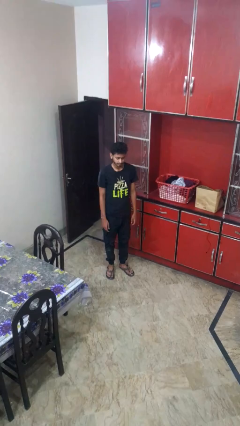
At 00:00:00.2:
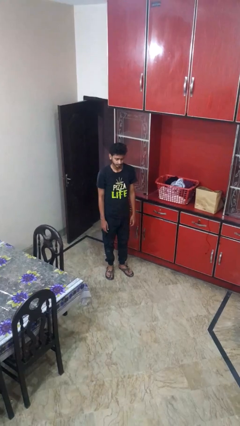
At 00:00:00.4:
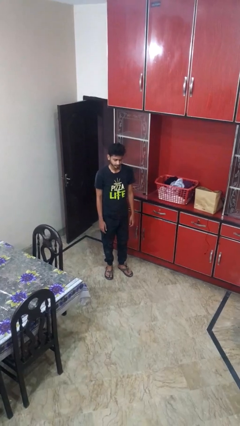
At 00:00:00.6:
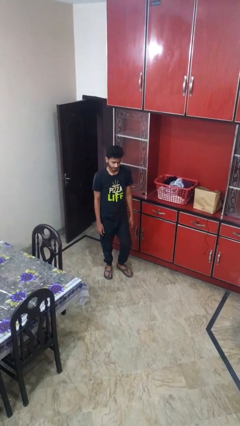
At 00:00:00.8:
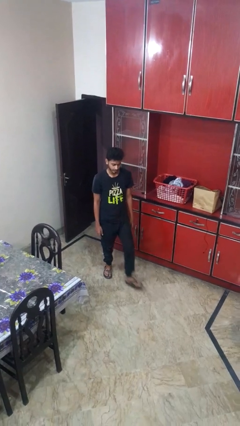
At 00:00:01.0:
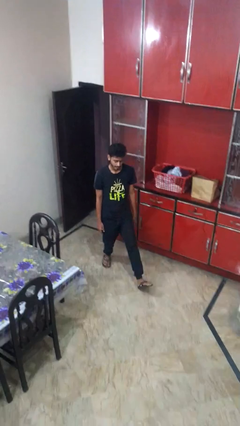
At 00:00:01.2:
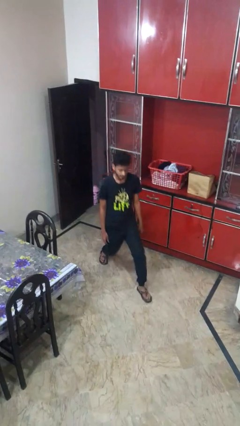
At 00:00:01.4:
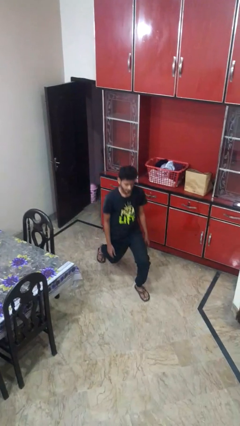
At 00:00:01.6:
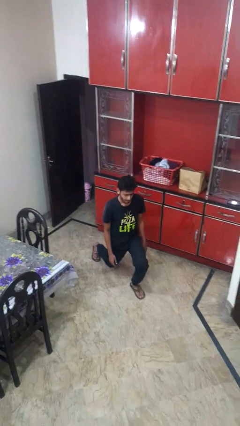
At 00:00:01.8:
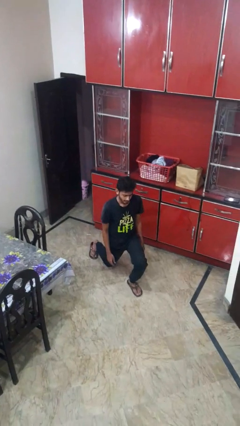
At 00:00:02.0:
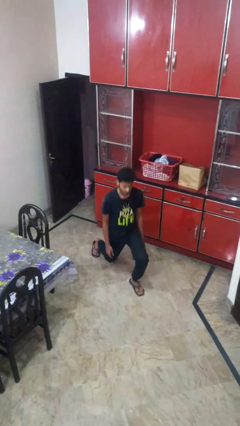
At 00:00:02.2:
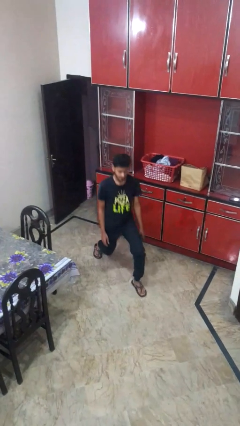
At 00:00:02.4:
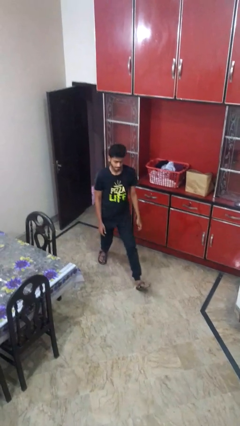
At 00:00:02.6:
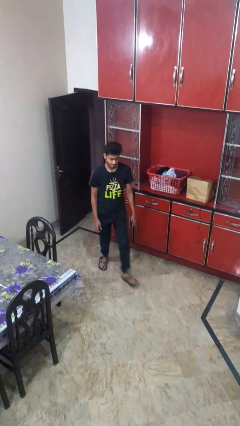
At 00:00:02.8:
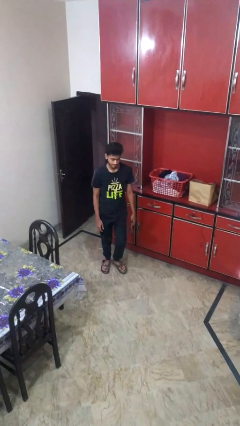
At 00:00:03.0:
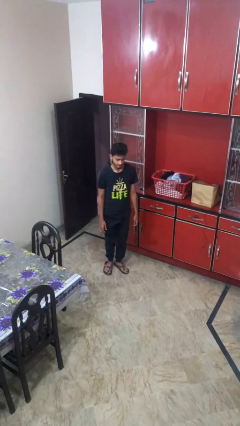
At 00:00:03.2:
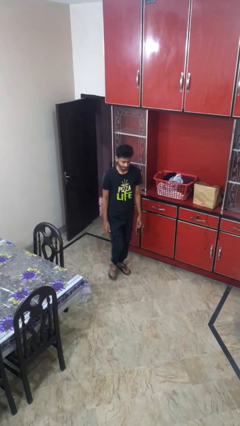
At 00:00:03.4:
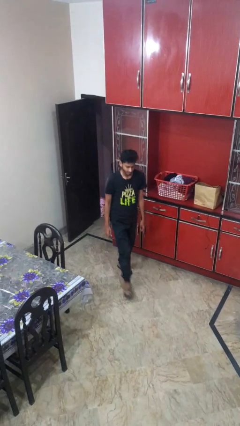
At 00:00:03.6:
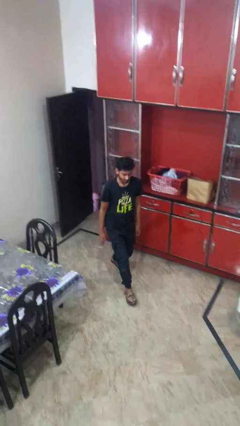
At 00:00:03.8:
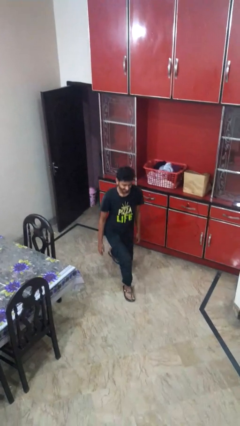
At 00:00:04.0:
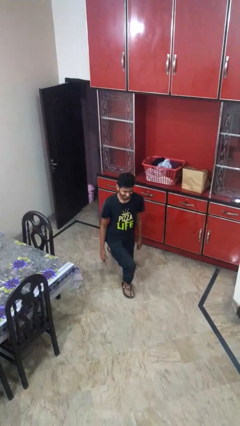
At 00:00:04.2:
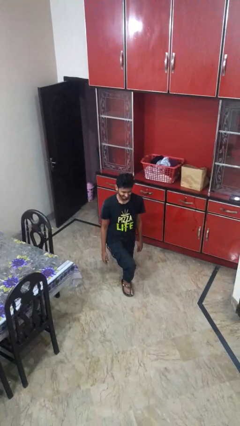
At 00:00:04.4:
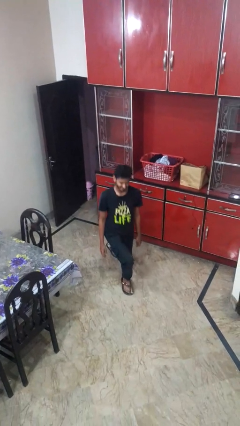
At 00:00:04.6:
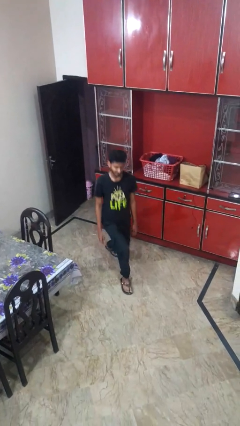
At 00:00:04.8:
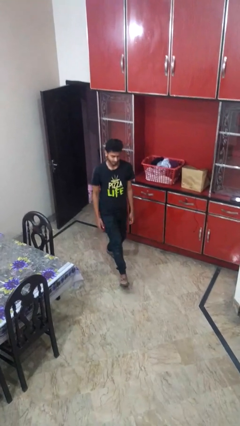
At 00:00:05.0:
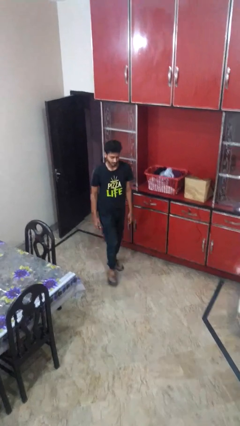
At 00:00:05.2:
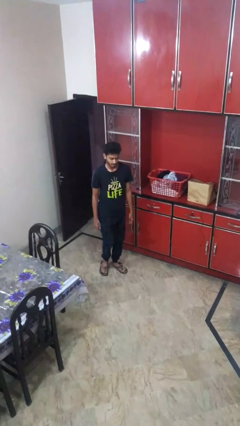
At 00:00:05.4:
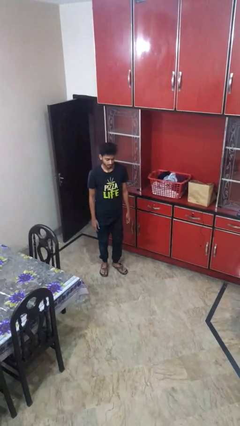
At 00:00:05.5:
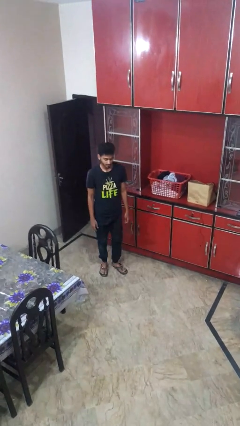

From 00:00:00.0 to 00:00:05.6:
person exercises with lunges

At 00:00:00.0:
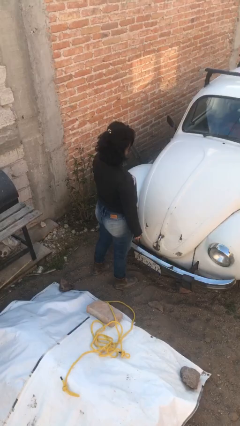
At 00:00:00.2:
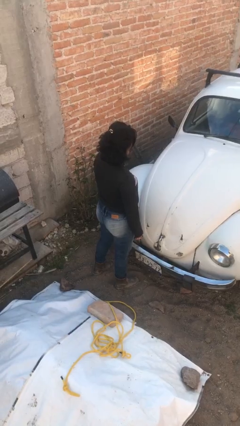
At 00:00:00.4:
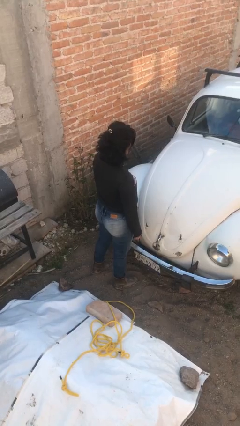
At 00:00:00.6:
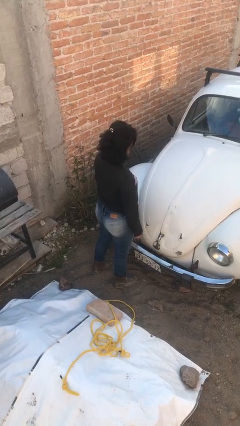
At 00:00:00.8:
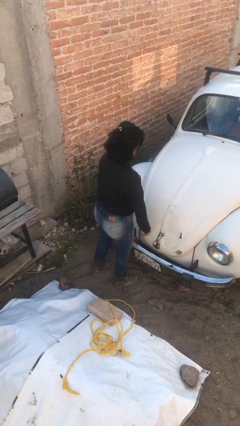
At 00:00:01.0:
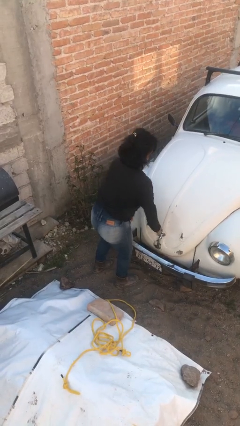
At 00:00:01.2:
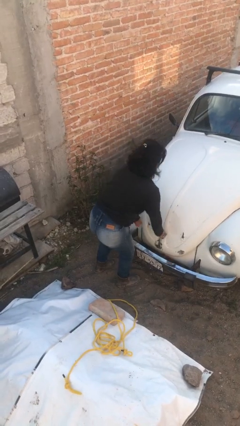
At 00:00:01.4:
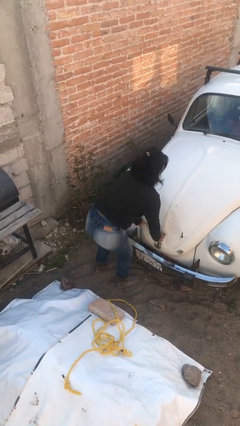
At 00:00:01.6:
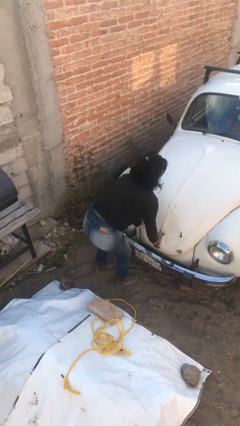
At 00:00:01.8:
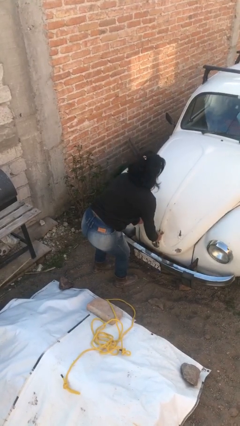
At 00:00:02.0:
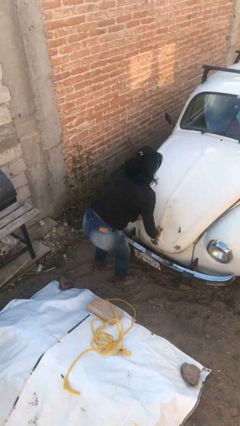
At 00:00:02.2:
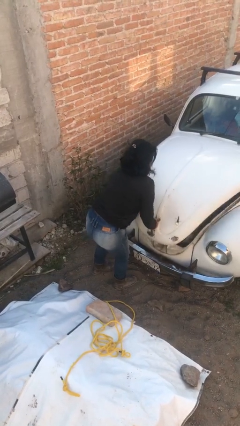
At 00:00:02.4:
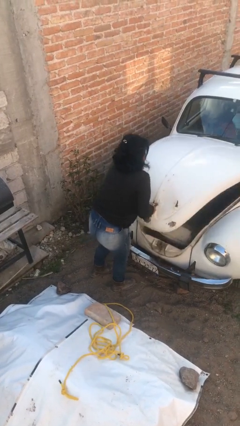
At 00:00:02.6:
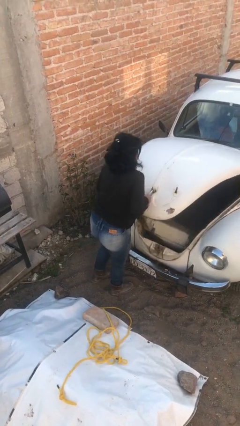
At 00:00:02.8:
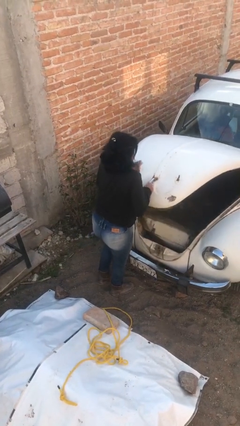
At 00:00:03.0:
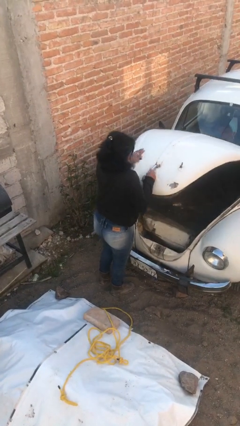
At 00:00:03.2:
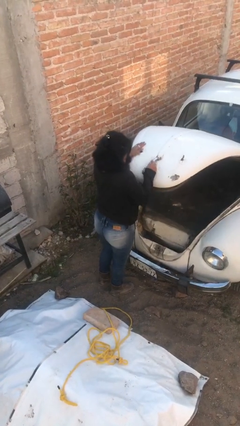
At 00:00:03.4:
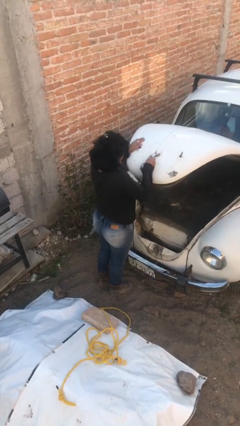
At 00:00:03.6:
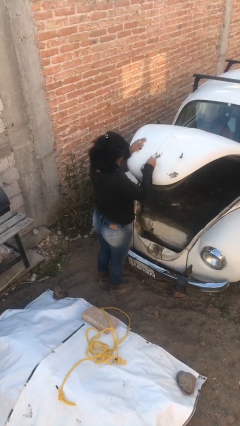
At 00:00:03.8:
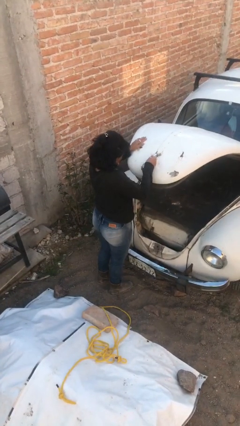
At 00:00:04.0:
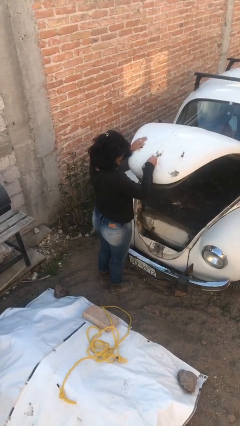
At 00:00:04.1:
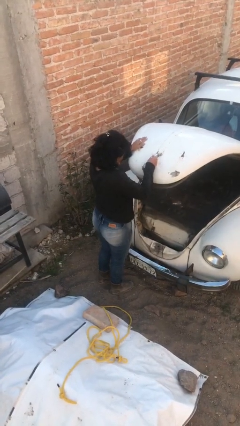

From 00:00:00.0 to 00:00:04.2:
person opens car trunk

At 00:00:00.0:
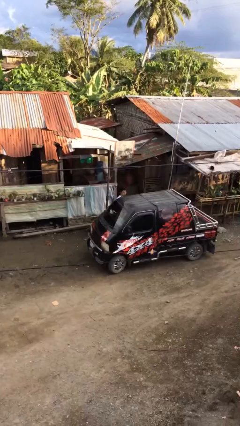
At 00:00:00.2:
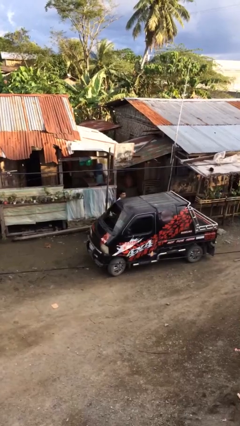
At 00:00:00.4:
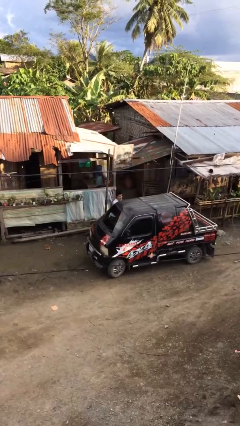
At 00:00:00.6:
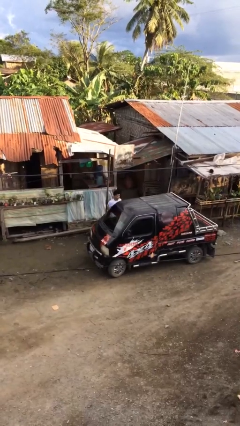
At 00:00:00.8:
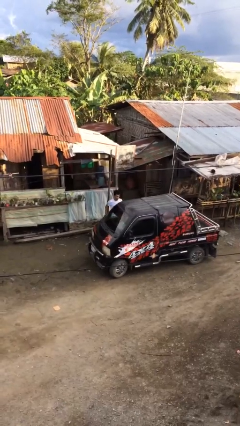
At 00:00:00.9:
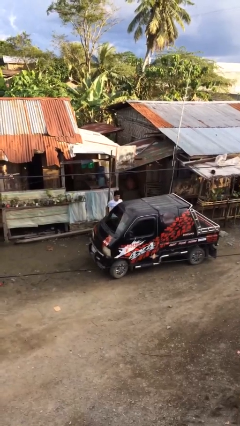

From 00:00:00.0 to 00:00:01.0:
person closes car door

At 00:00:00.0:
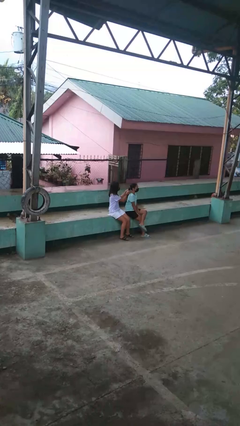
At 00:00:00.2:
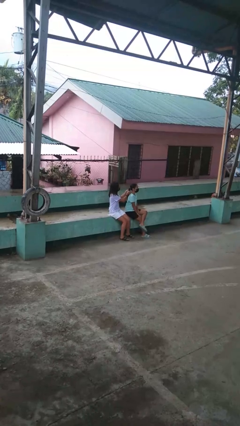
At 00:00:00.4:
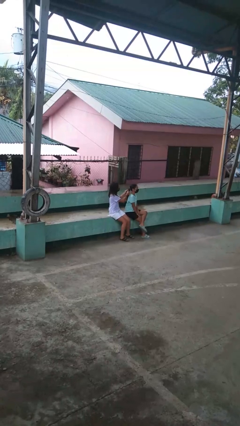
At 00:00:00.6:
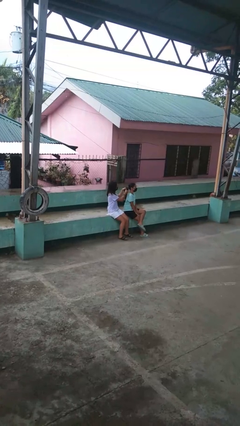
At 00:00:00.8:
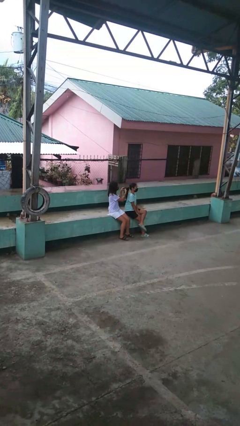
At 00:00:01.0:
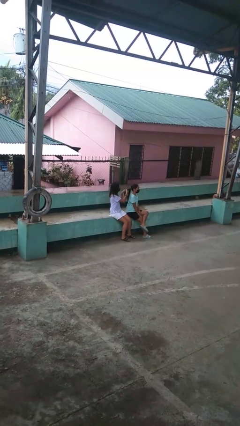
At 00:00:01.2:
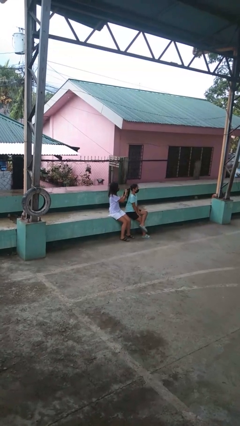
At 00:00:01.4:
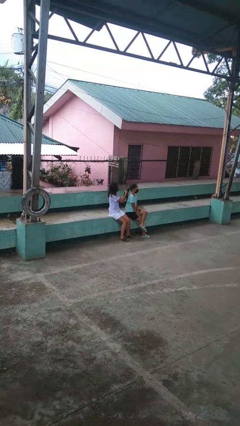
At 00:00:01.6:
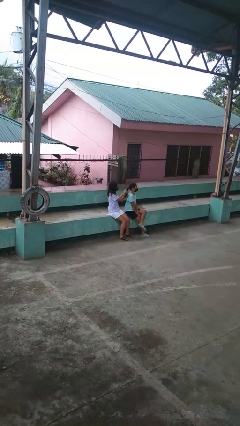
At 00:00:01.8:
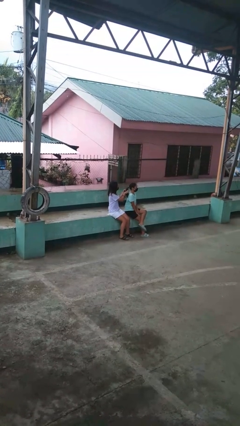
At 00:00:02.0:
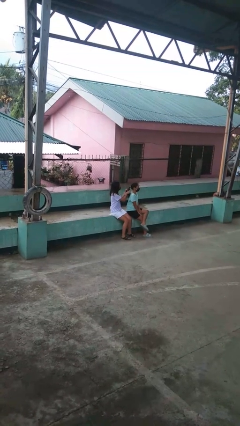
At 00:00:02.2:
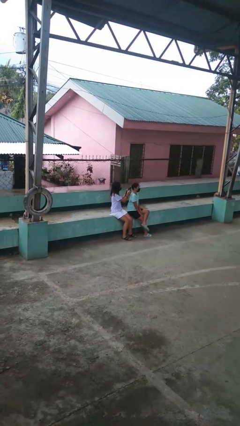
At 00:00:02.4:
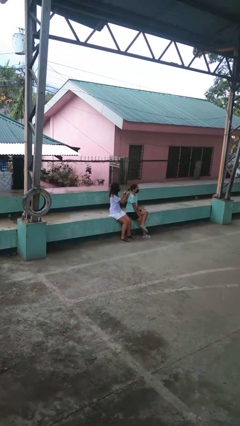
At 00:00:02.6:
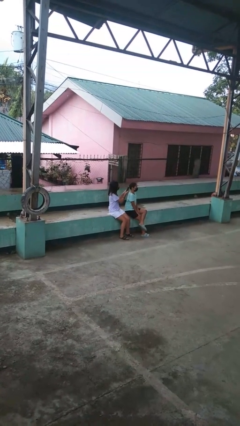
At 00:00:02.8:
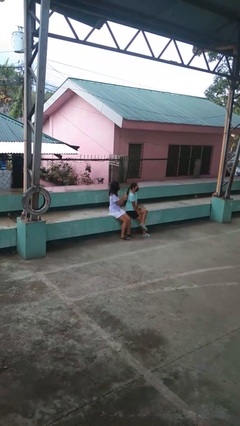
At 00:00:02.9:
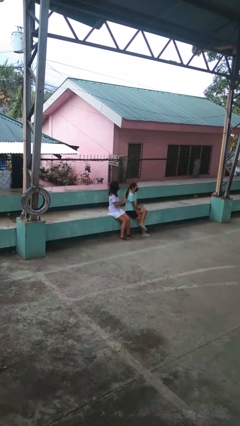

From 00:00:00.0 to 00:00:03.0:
person braids hair of person

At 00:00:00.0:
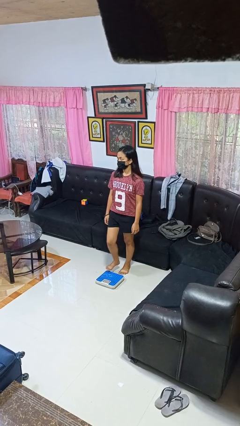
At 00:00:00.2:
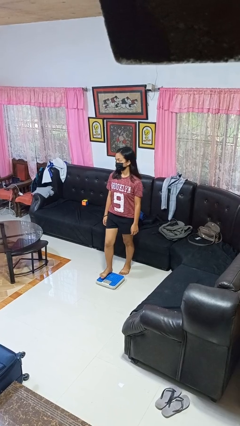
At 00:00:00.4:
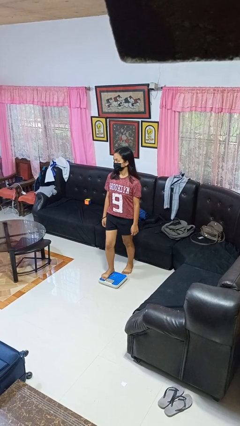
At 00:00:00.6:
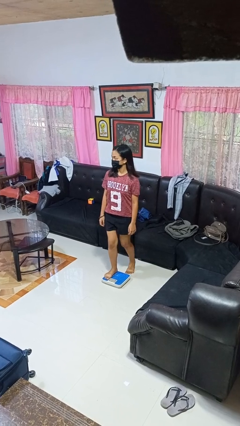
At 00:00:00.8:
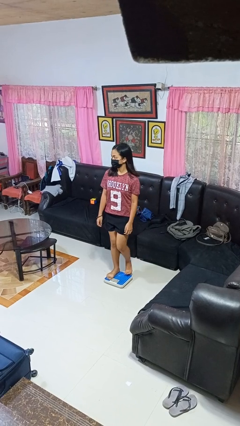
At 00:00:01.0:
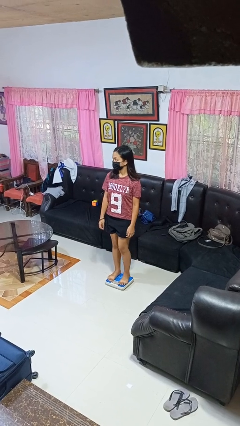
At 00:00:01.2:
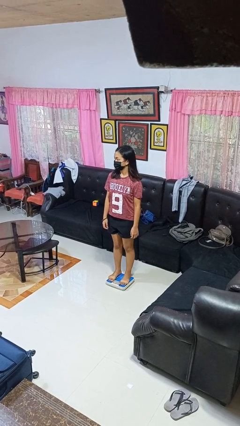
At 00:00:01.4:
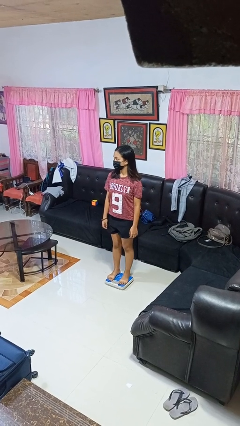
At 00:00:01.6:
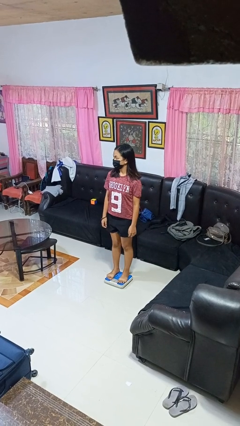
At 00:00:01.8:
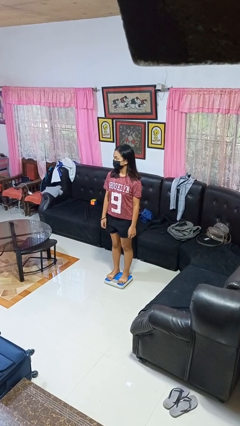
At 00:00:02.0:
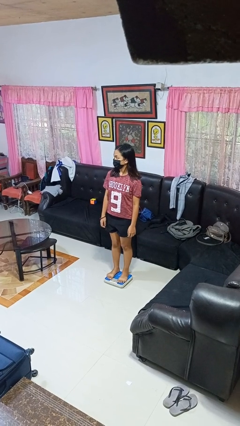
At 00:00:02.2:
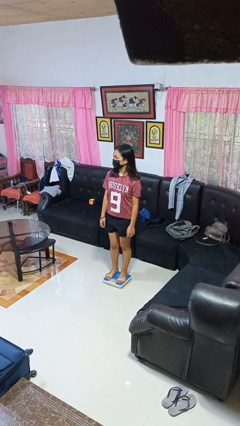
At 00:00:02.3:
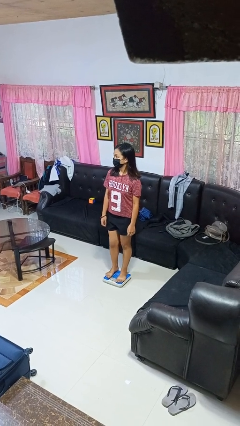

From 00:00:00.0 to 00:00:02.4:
person uses bodyweight scale

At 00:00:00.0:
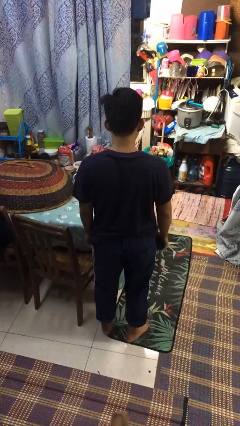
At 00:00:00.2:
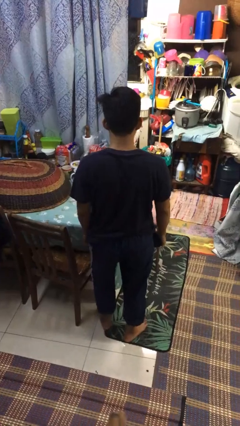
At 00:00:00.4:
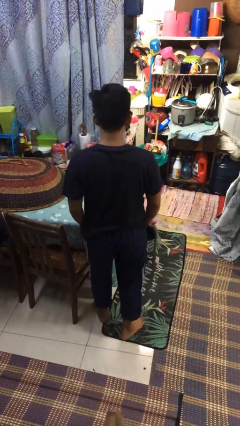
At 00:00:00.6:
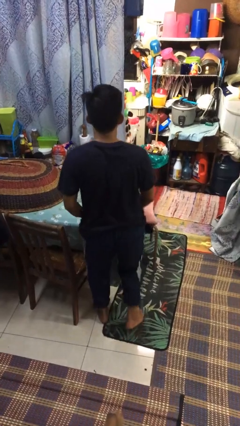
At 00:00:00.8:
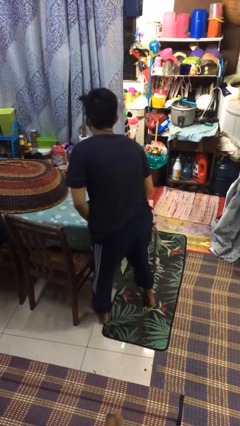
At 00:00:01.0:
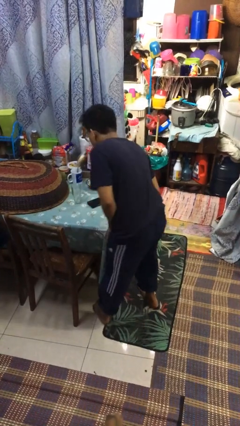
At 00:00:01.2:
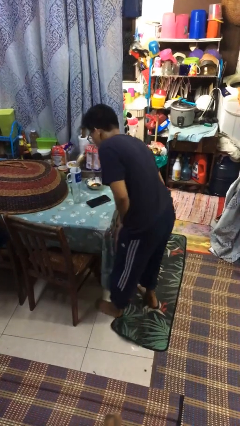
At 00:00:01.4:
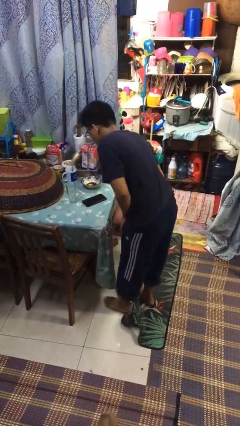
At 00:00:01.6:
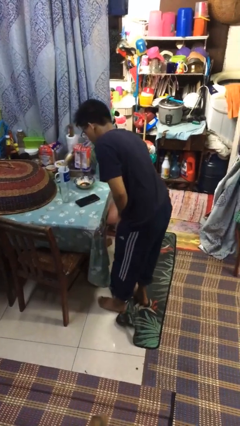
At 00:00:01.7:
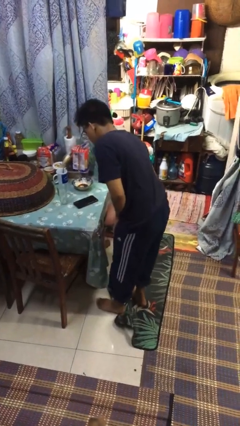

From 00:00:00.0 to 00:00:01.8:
person bumps into table
